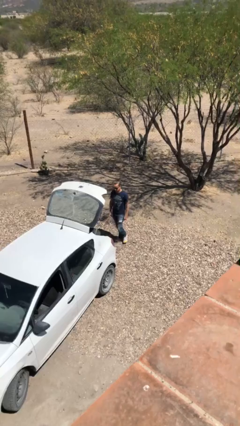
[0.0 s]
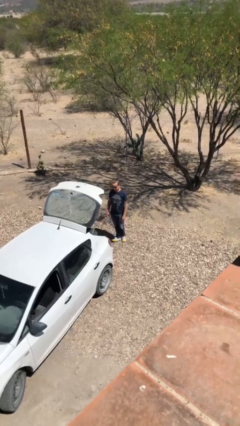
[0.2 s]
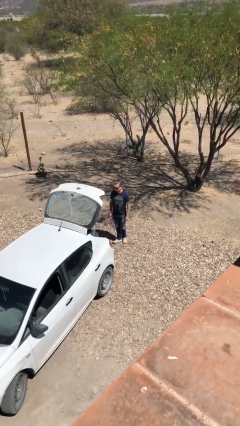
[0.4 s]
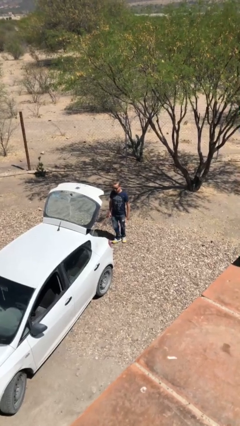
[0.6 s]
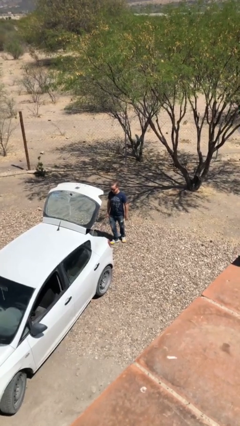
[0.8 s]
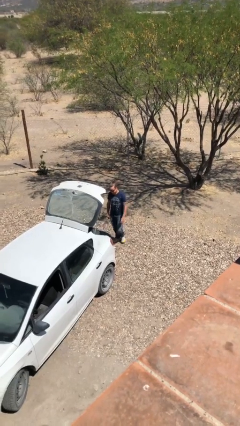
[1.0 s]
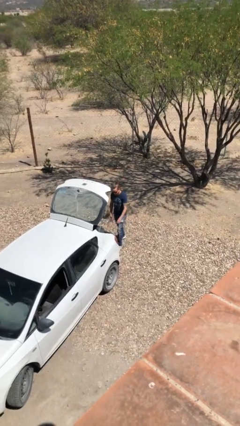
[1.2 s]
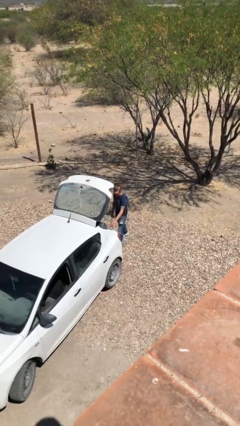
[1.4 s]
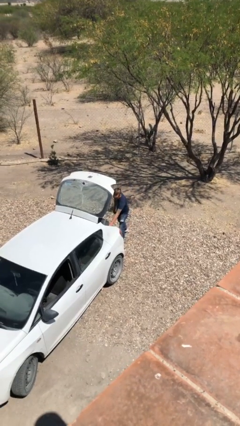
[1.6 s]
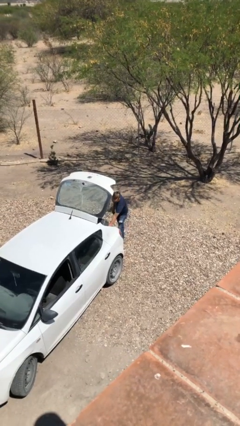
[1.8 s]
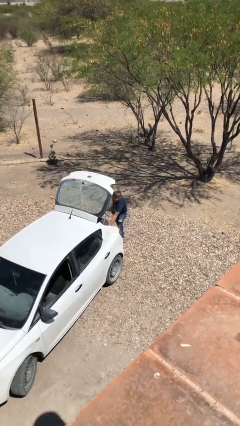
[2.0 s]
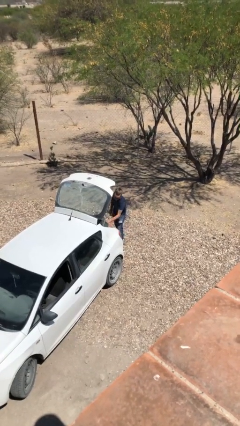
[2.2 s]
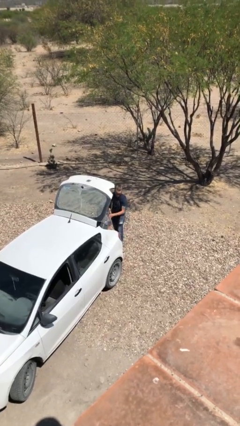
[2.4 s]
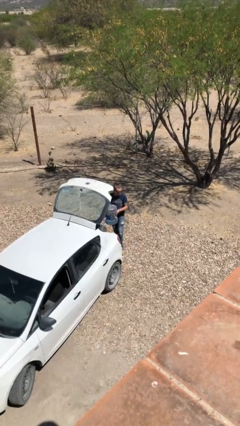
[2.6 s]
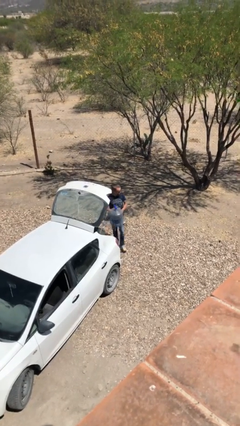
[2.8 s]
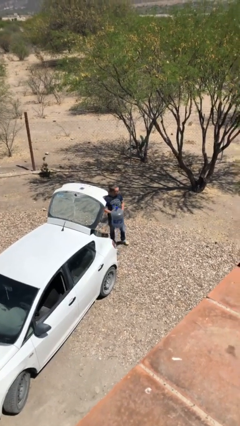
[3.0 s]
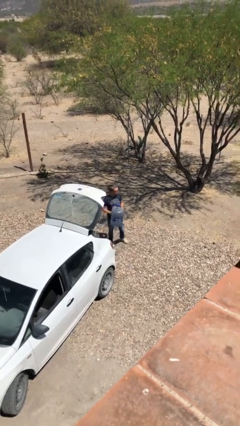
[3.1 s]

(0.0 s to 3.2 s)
person unloads car

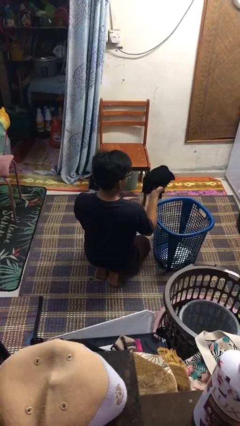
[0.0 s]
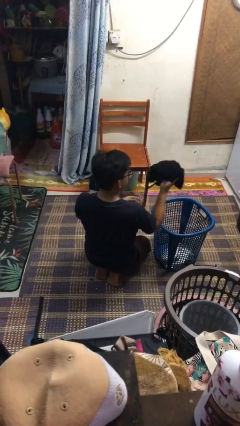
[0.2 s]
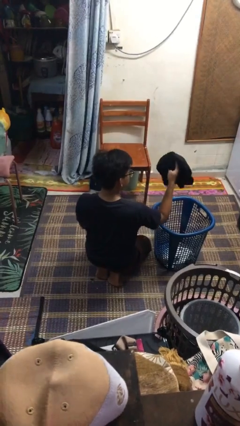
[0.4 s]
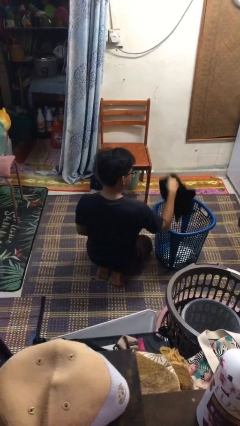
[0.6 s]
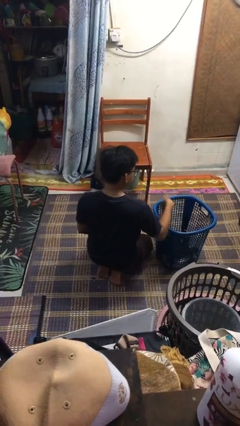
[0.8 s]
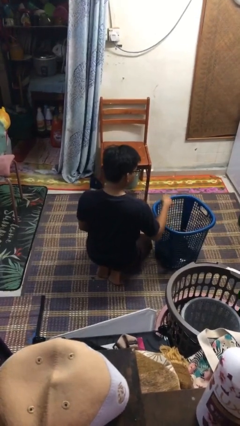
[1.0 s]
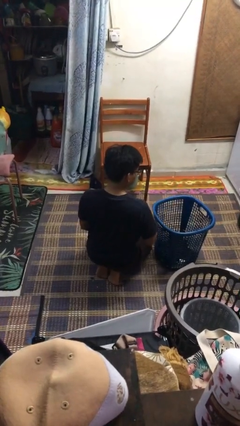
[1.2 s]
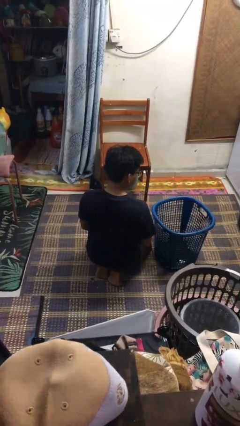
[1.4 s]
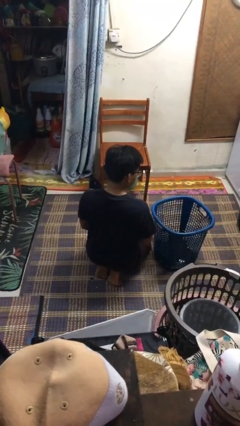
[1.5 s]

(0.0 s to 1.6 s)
person puts object into basket

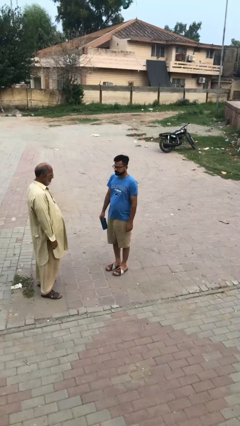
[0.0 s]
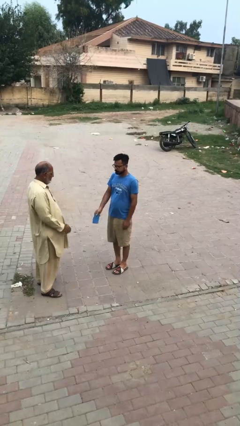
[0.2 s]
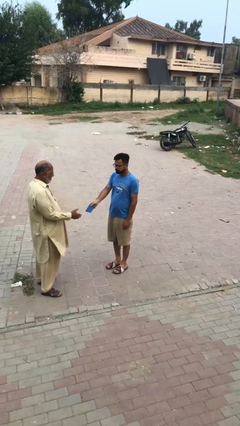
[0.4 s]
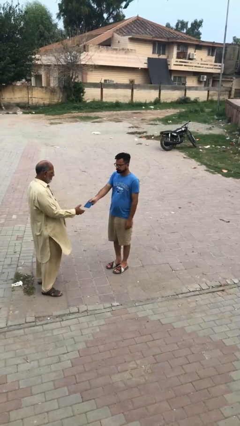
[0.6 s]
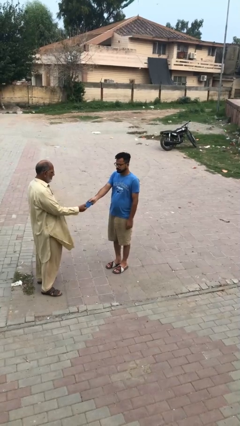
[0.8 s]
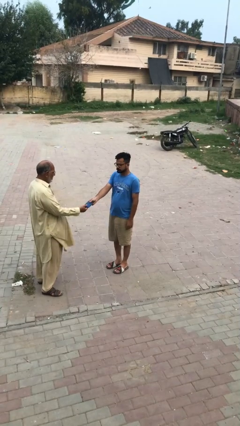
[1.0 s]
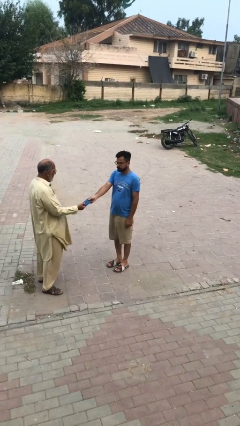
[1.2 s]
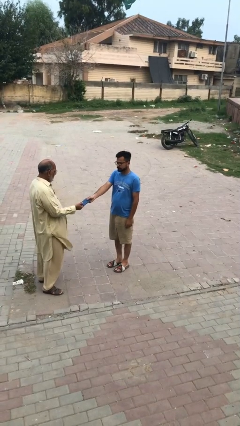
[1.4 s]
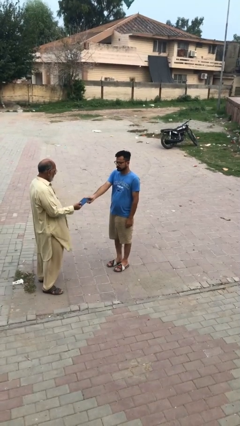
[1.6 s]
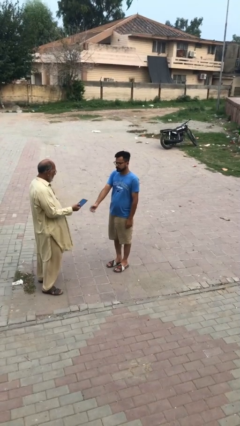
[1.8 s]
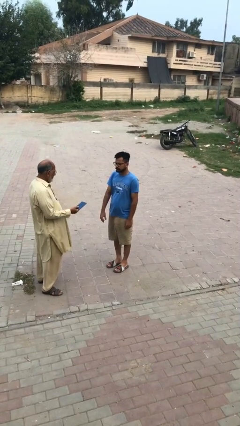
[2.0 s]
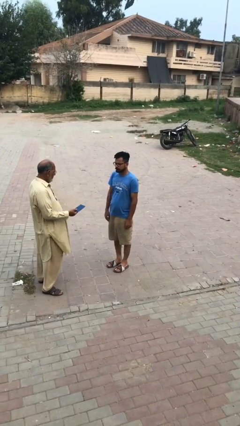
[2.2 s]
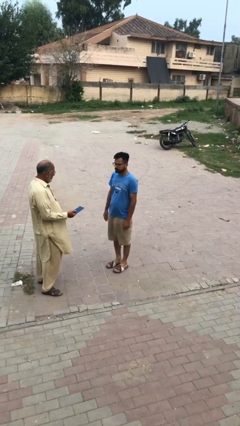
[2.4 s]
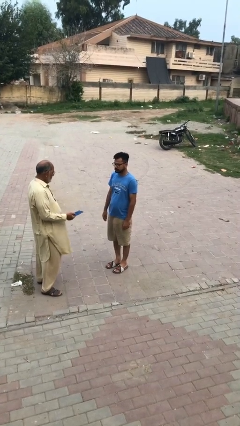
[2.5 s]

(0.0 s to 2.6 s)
person transfers object to person

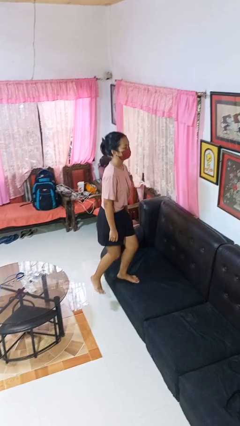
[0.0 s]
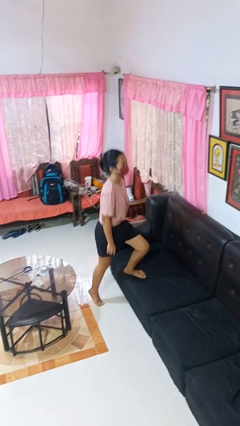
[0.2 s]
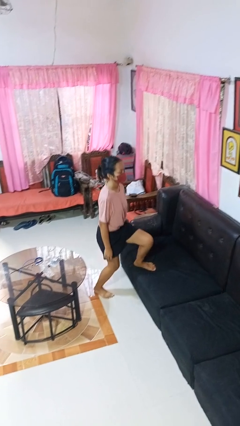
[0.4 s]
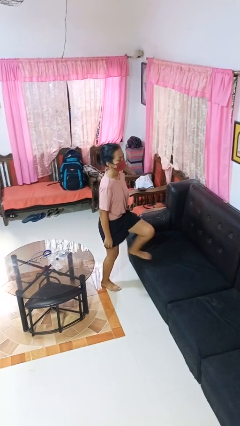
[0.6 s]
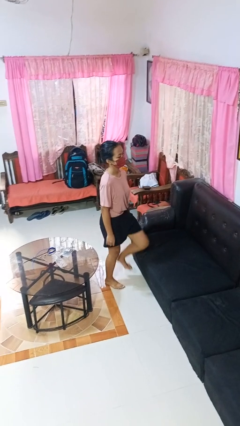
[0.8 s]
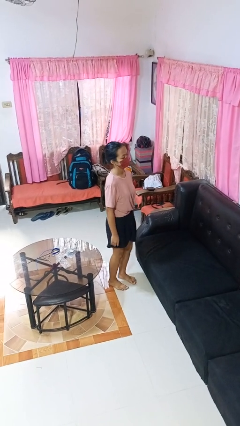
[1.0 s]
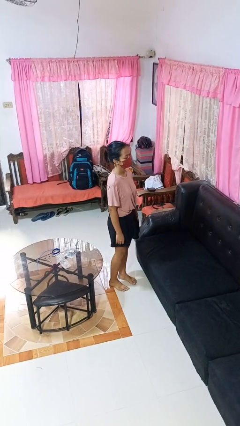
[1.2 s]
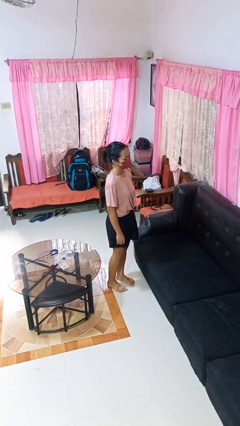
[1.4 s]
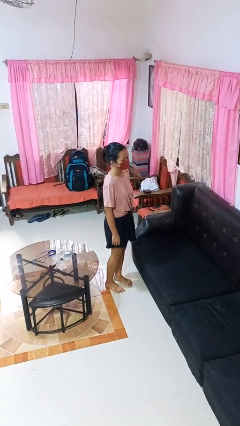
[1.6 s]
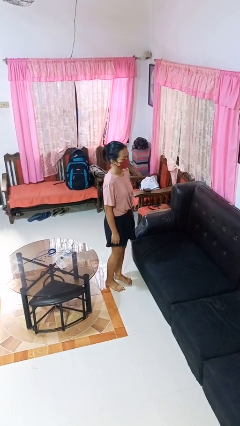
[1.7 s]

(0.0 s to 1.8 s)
person climbs off couch

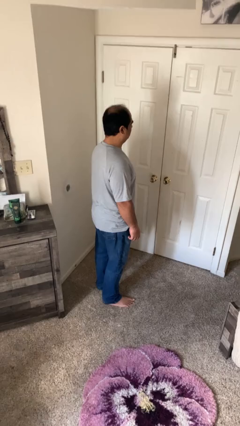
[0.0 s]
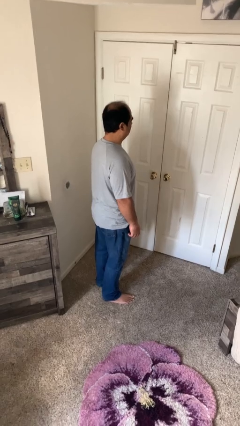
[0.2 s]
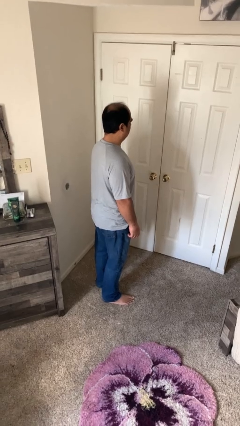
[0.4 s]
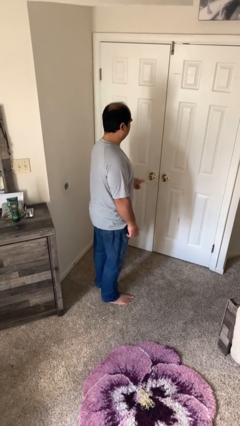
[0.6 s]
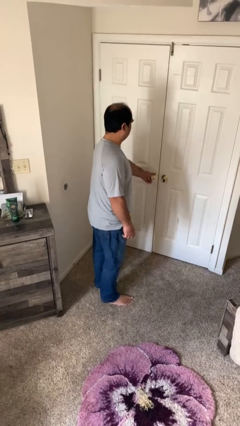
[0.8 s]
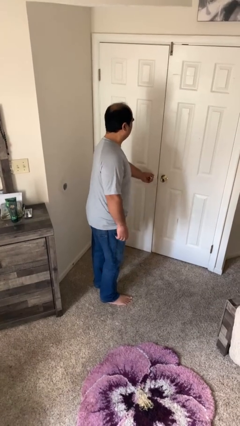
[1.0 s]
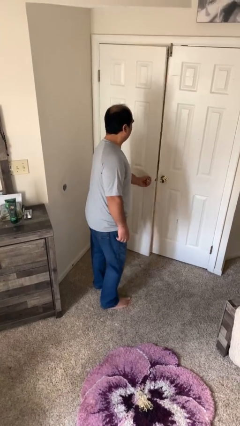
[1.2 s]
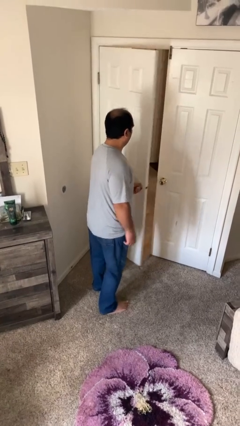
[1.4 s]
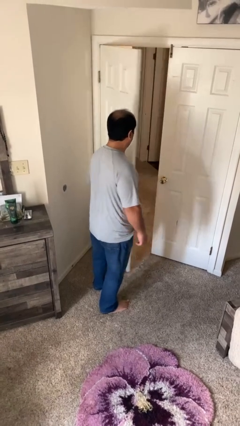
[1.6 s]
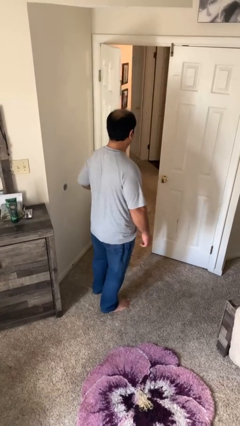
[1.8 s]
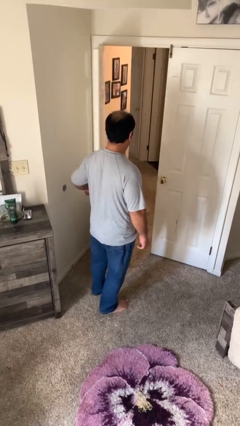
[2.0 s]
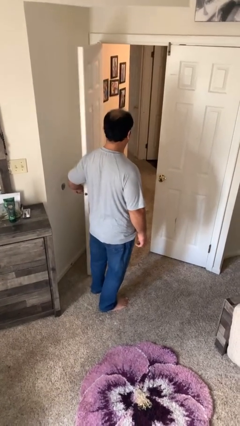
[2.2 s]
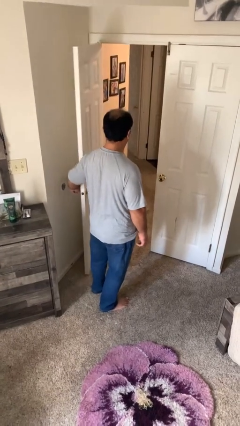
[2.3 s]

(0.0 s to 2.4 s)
person opens facility door

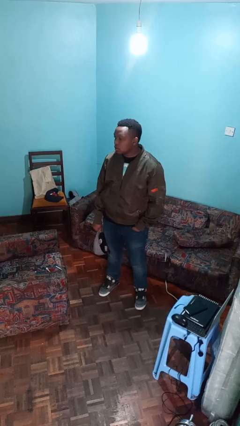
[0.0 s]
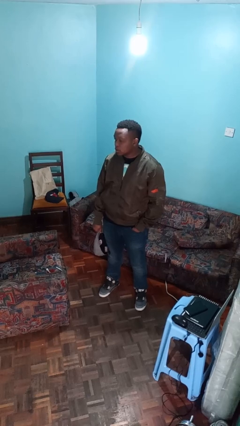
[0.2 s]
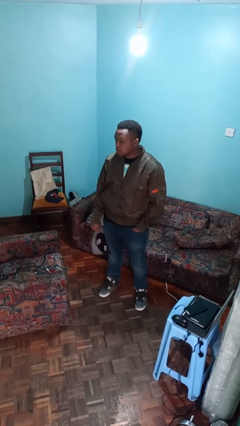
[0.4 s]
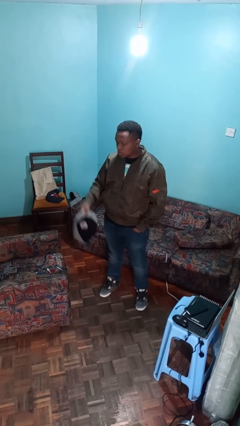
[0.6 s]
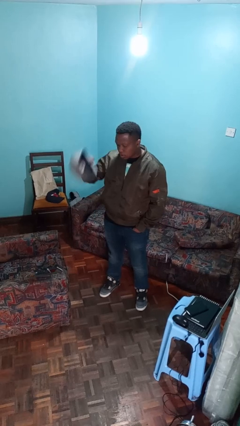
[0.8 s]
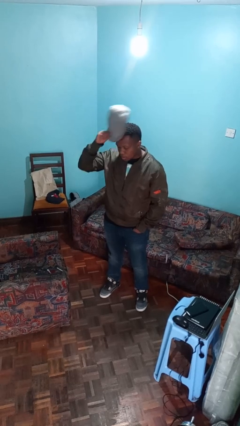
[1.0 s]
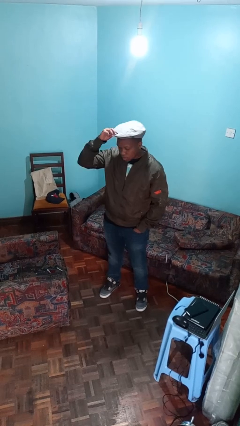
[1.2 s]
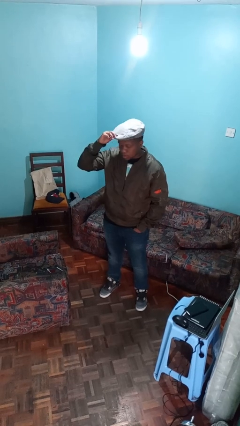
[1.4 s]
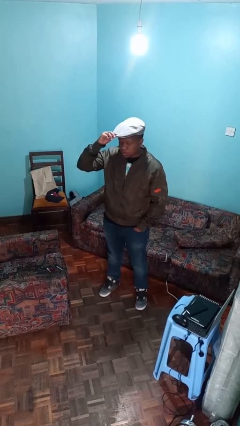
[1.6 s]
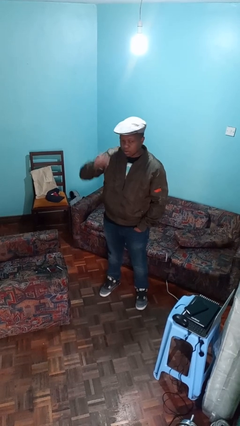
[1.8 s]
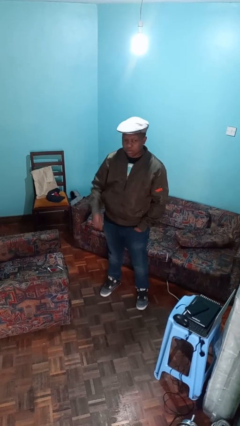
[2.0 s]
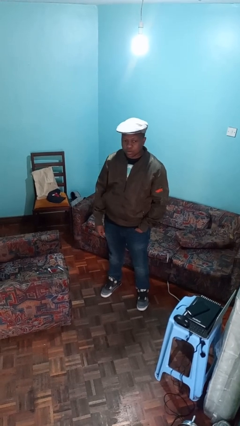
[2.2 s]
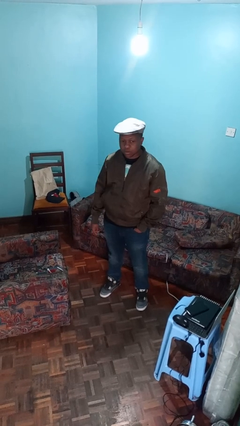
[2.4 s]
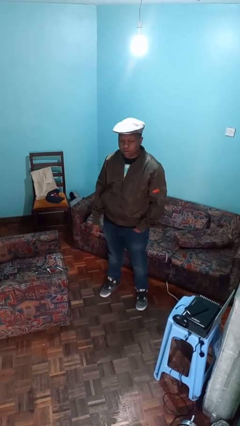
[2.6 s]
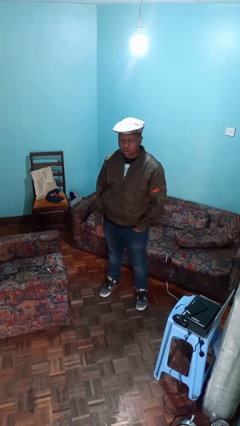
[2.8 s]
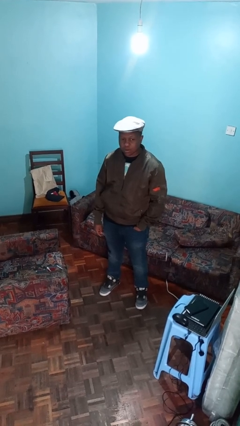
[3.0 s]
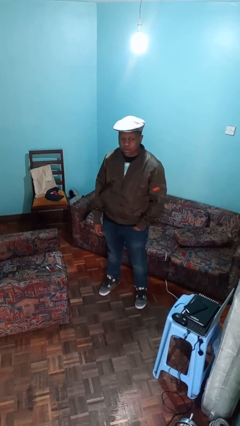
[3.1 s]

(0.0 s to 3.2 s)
person puts on hat

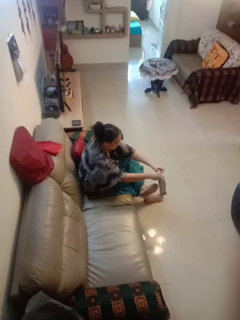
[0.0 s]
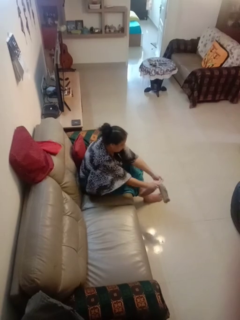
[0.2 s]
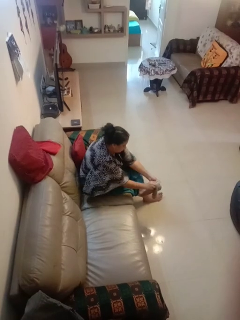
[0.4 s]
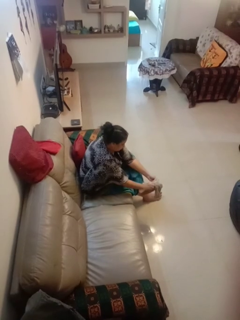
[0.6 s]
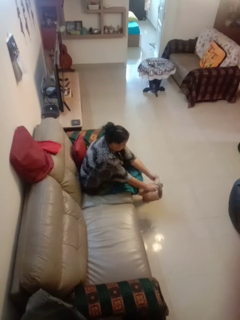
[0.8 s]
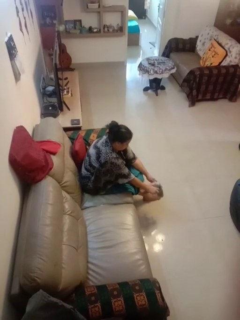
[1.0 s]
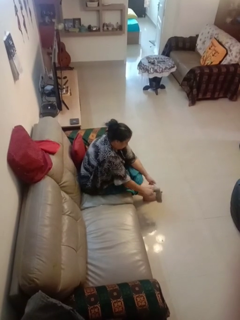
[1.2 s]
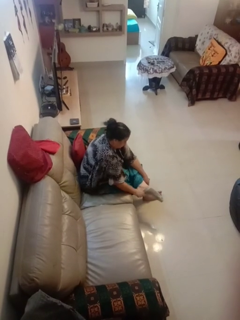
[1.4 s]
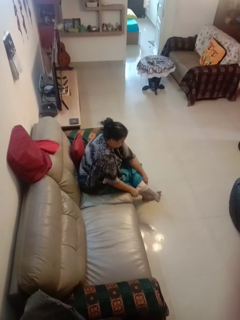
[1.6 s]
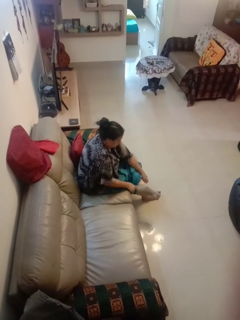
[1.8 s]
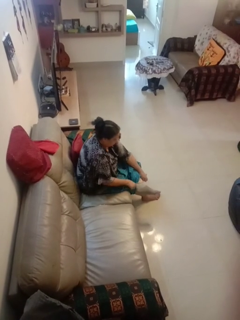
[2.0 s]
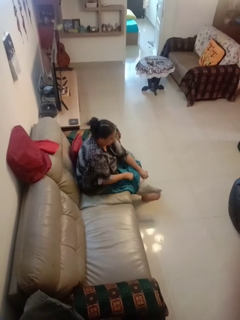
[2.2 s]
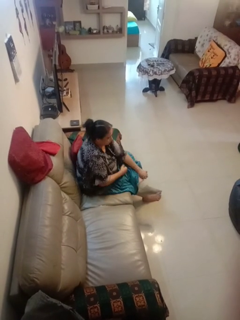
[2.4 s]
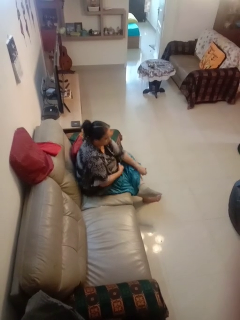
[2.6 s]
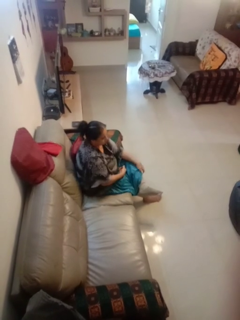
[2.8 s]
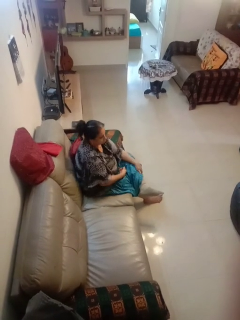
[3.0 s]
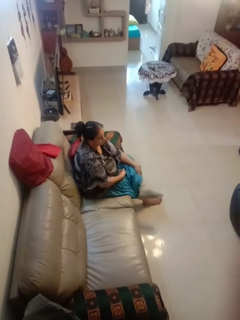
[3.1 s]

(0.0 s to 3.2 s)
person puts on socks
